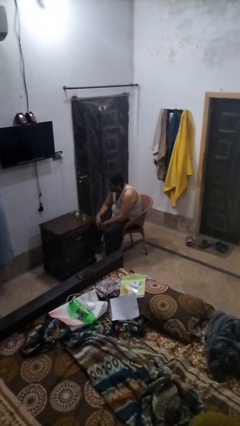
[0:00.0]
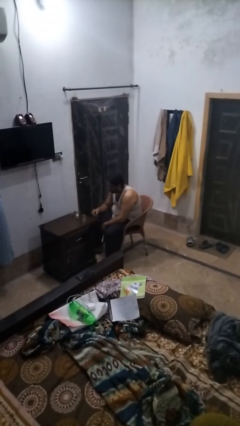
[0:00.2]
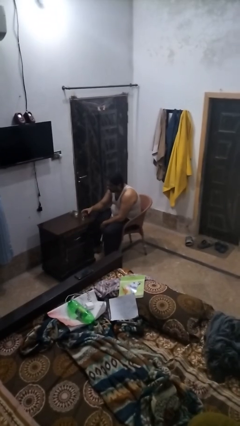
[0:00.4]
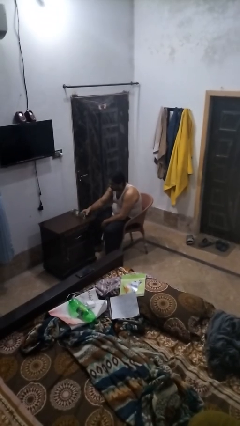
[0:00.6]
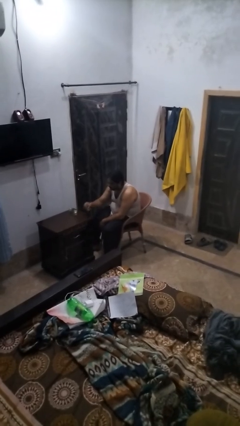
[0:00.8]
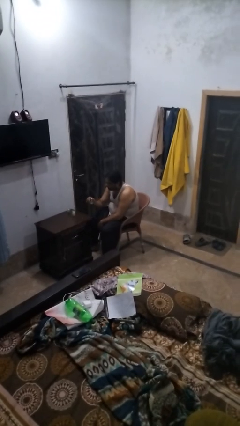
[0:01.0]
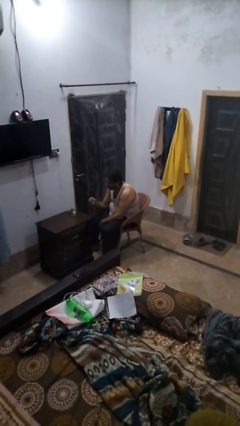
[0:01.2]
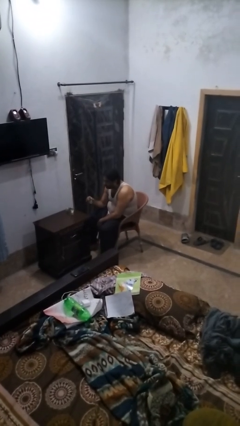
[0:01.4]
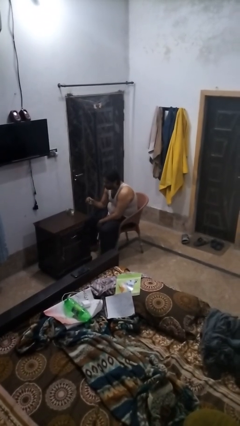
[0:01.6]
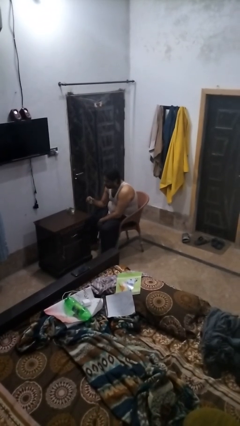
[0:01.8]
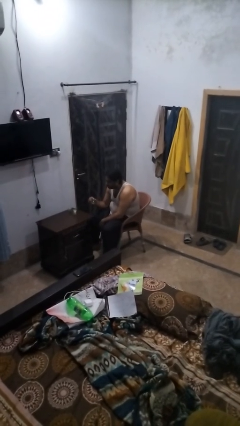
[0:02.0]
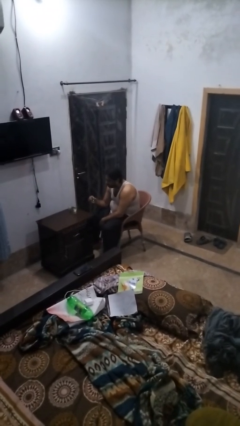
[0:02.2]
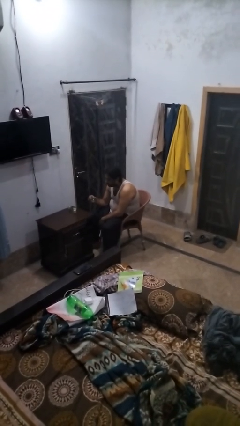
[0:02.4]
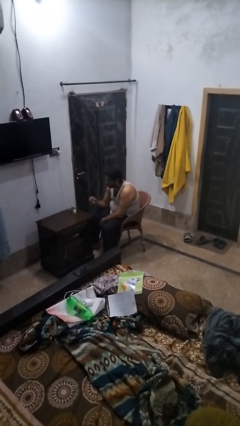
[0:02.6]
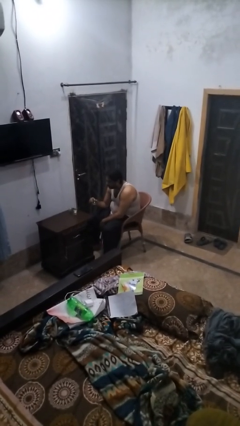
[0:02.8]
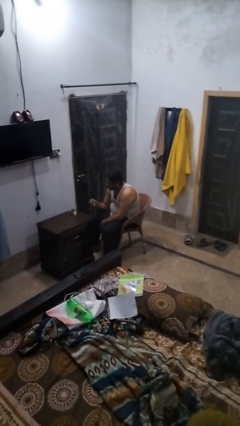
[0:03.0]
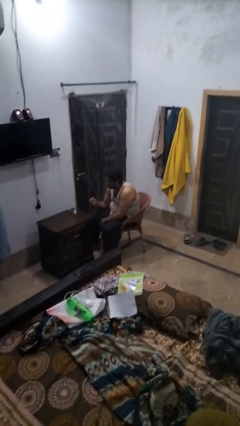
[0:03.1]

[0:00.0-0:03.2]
person picks up object from table

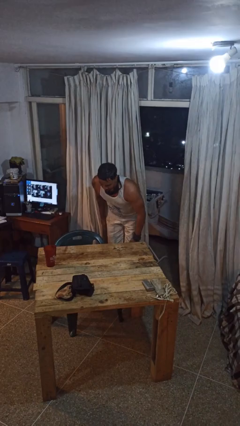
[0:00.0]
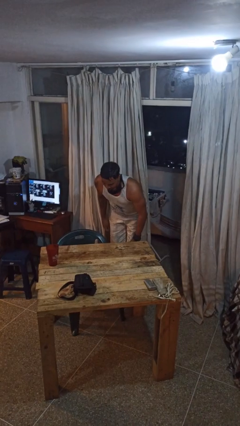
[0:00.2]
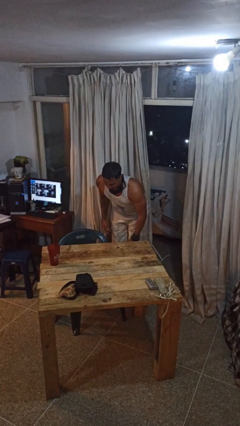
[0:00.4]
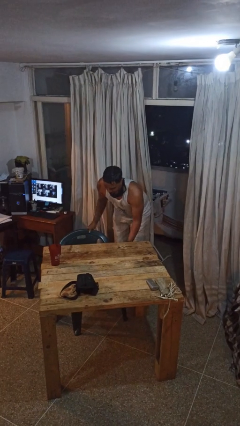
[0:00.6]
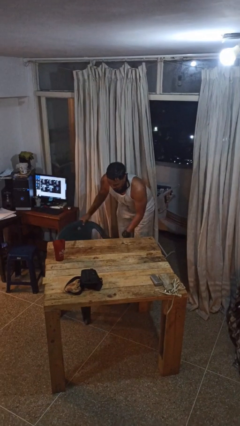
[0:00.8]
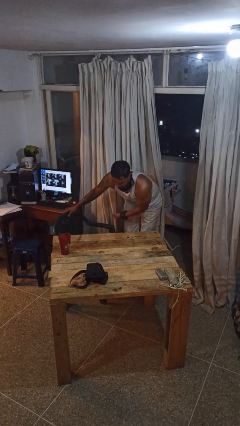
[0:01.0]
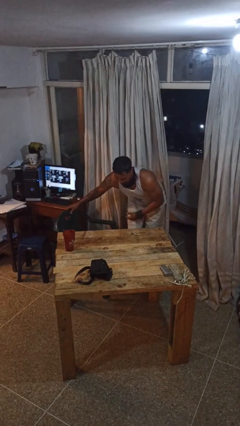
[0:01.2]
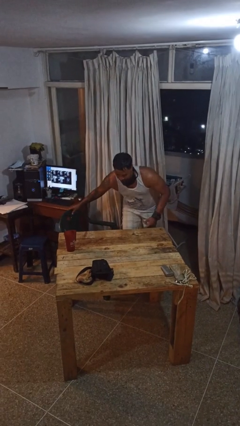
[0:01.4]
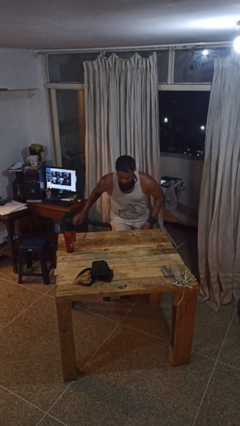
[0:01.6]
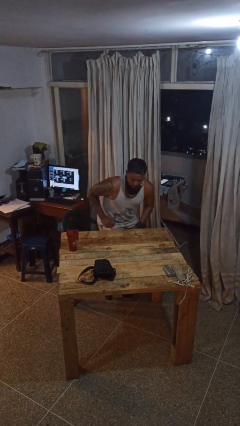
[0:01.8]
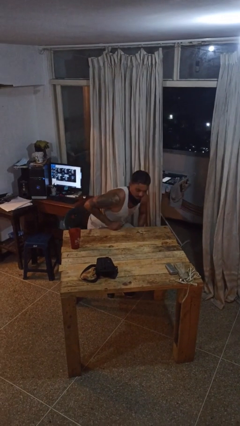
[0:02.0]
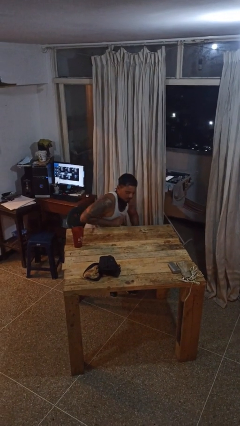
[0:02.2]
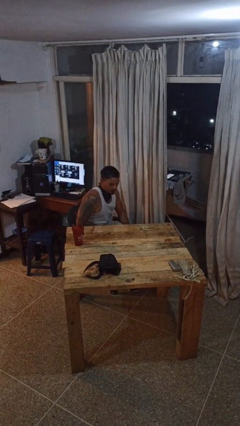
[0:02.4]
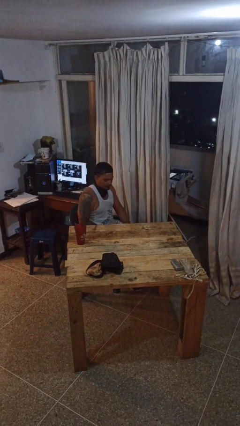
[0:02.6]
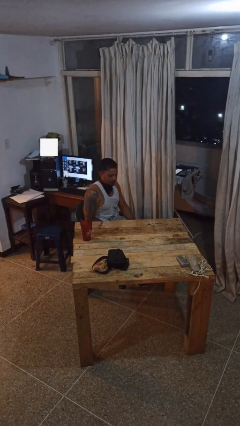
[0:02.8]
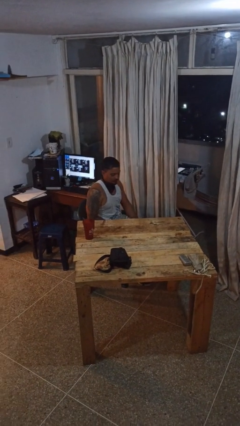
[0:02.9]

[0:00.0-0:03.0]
person sits down

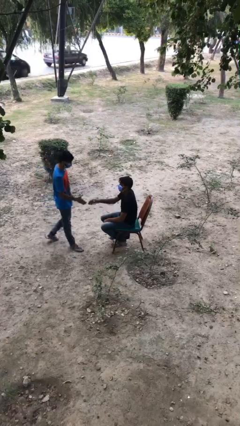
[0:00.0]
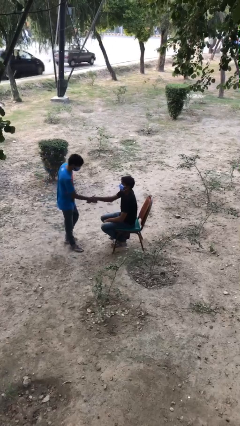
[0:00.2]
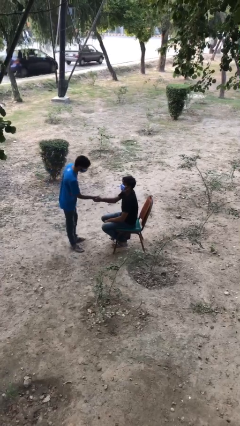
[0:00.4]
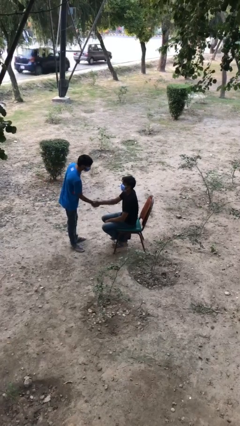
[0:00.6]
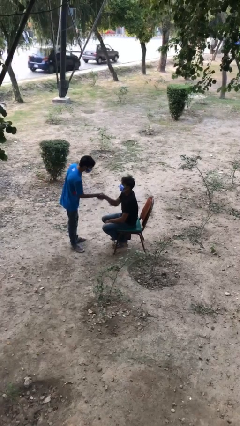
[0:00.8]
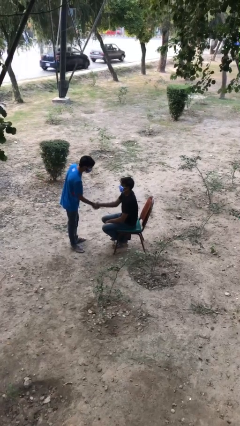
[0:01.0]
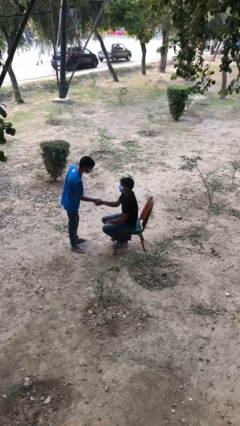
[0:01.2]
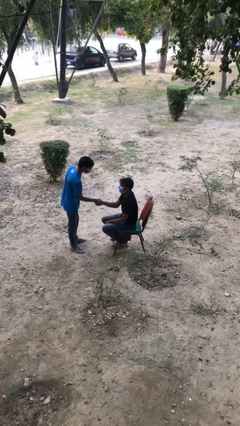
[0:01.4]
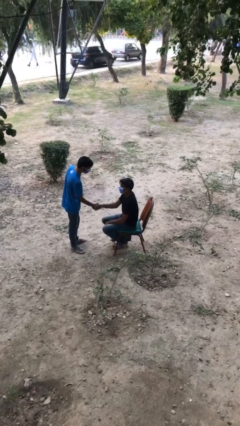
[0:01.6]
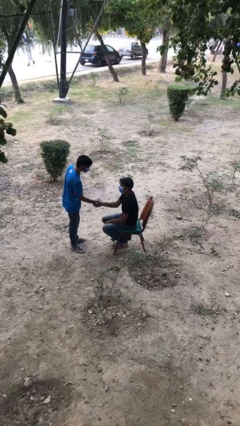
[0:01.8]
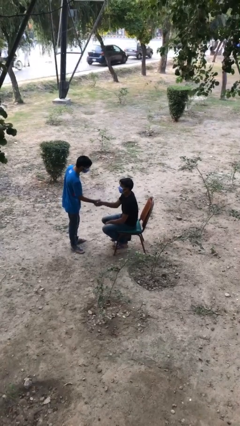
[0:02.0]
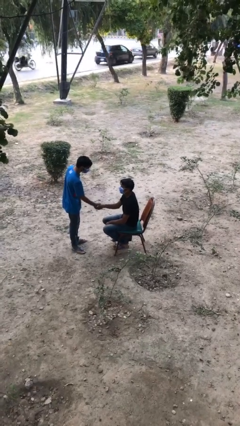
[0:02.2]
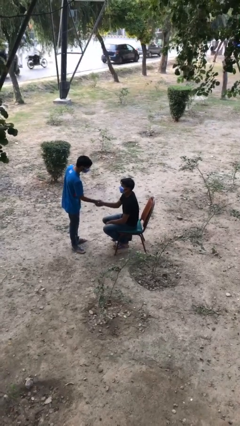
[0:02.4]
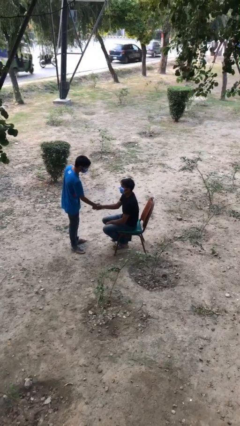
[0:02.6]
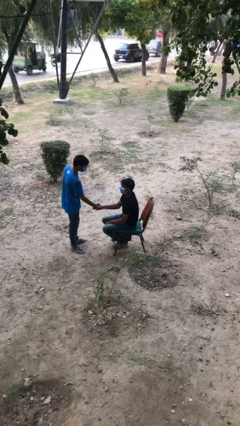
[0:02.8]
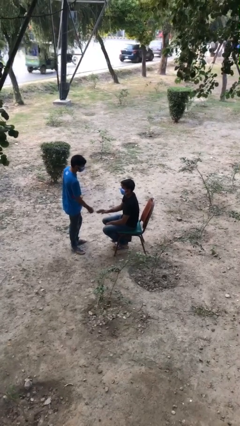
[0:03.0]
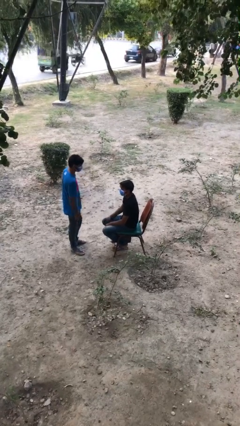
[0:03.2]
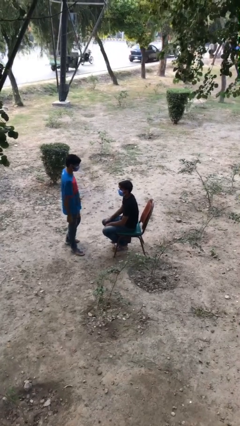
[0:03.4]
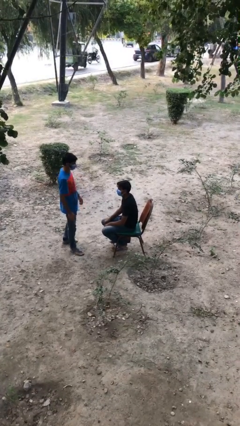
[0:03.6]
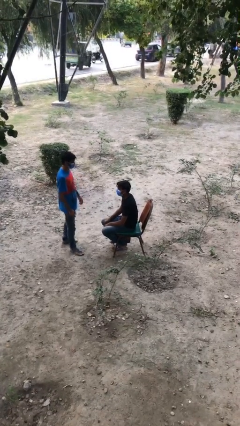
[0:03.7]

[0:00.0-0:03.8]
person shakes hand

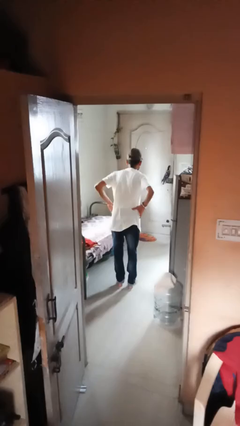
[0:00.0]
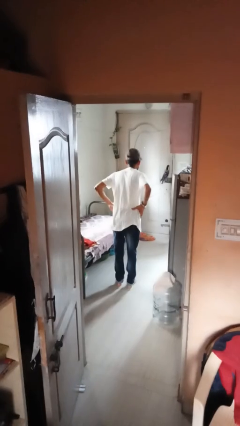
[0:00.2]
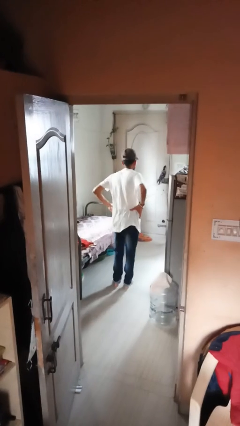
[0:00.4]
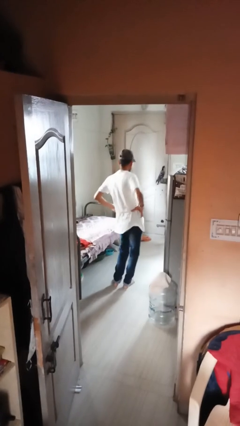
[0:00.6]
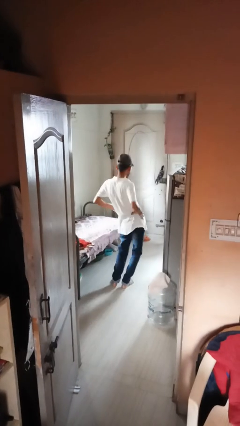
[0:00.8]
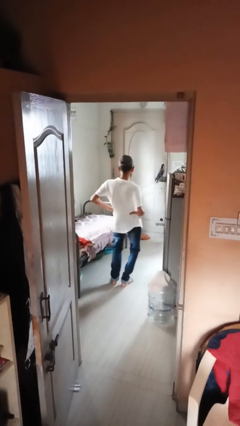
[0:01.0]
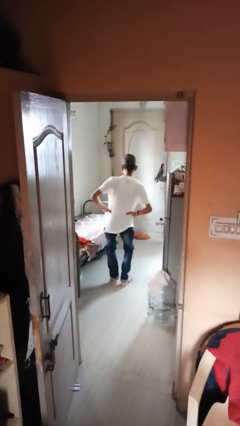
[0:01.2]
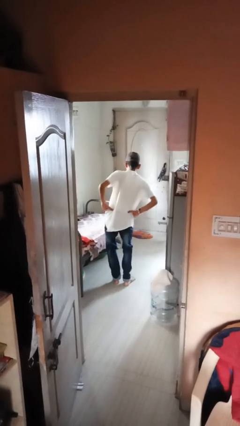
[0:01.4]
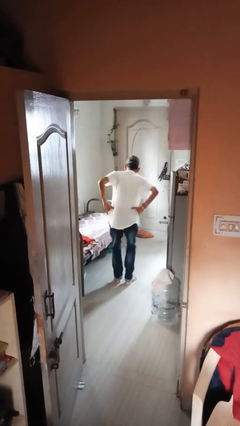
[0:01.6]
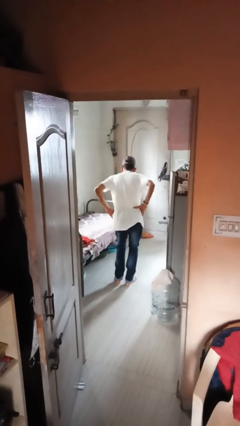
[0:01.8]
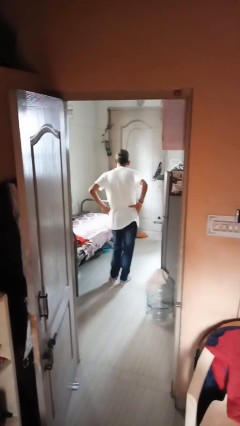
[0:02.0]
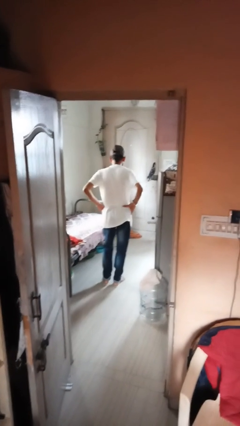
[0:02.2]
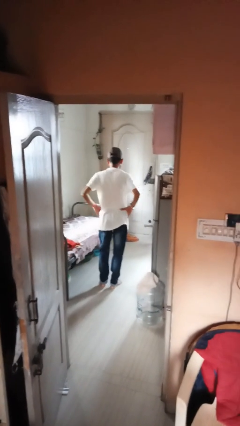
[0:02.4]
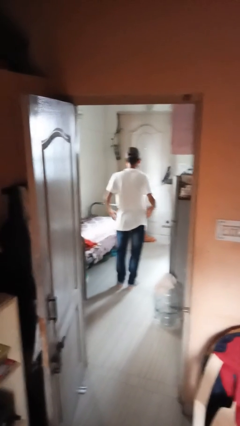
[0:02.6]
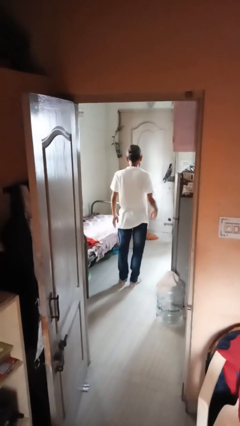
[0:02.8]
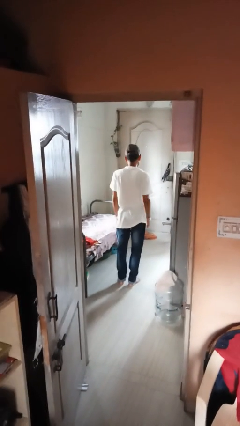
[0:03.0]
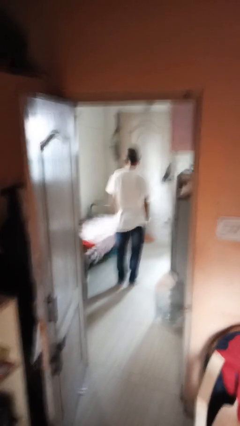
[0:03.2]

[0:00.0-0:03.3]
person wiggles hips

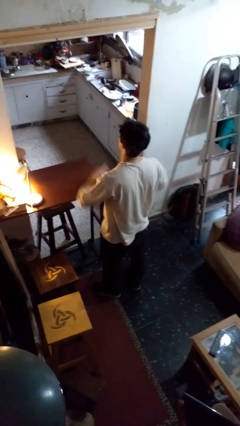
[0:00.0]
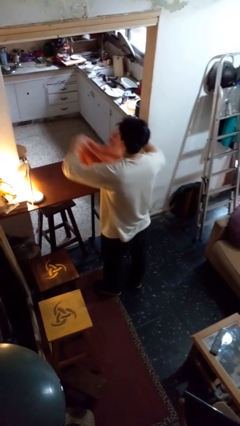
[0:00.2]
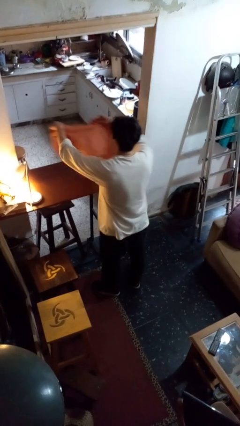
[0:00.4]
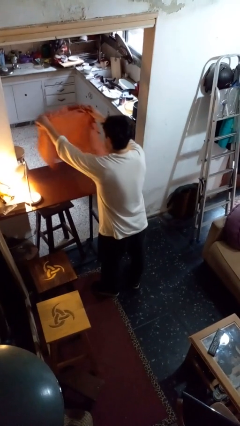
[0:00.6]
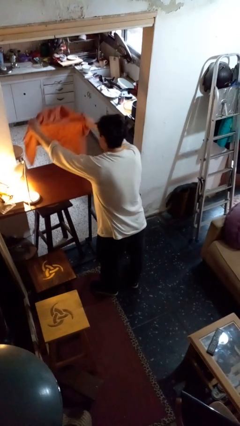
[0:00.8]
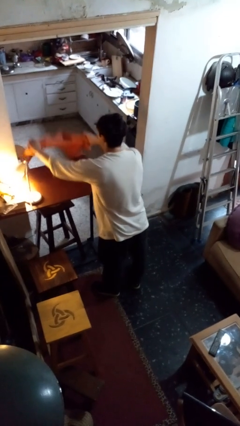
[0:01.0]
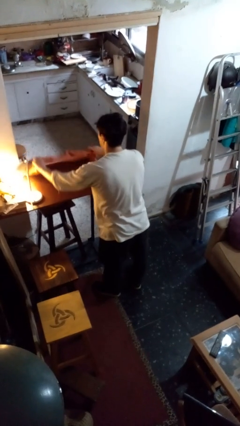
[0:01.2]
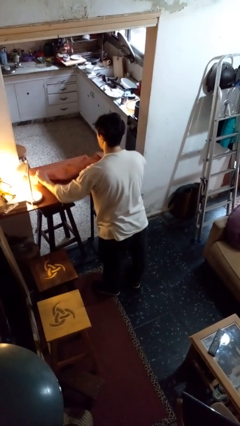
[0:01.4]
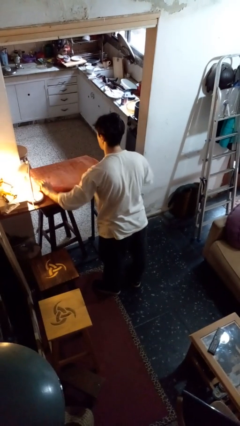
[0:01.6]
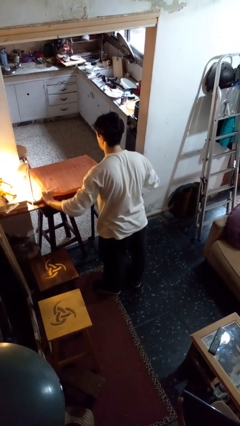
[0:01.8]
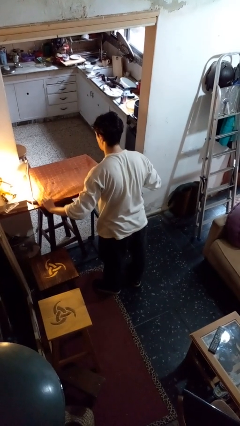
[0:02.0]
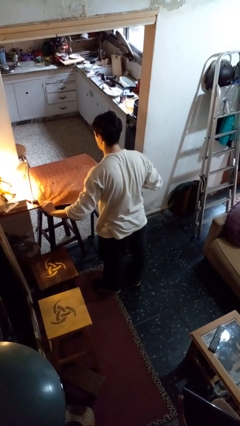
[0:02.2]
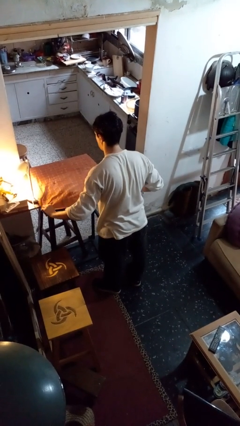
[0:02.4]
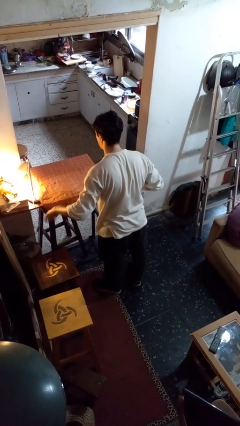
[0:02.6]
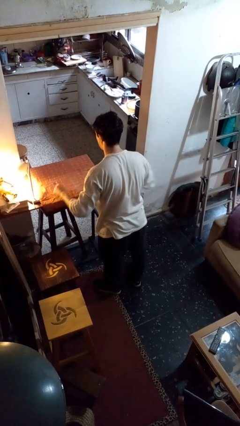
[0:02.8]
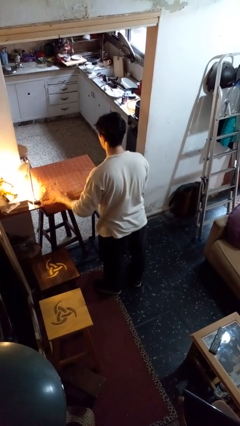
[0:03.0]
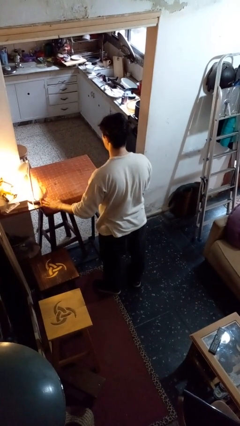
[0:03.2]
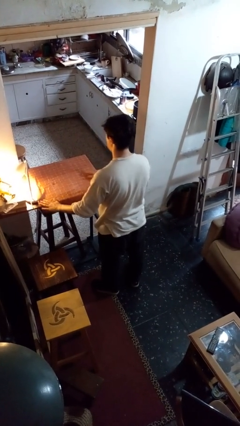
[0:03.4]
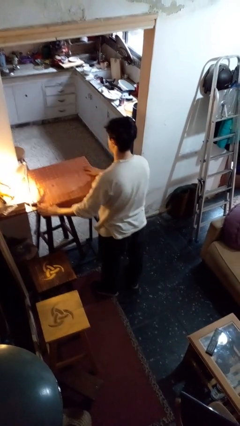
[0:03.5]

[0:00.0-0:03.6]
person spreads tablecloth

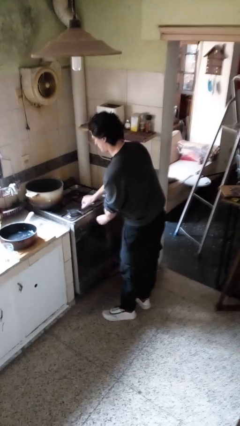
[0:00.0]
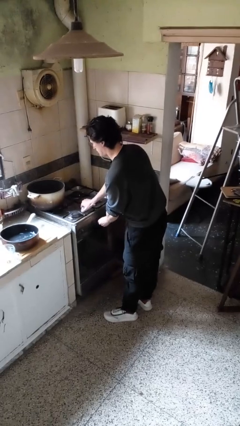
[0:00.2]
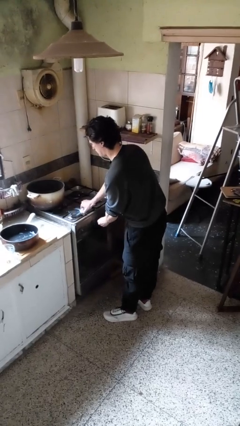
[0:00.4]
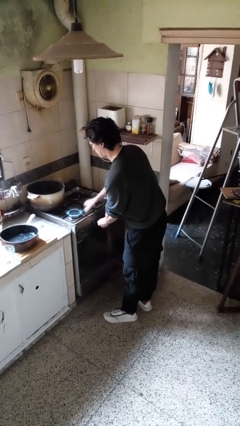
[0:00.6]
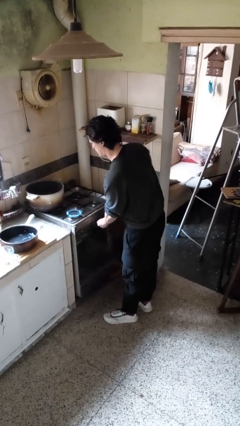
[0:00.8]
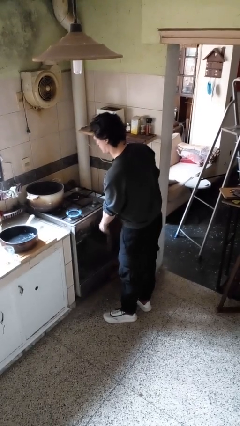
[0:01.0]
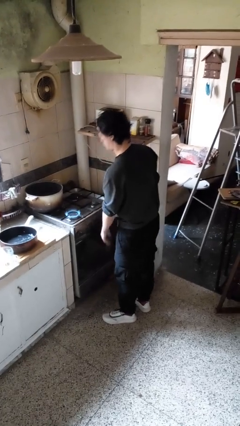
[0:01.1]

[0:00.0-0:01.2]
person turns on stovetop
